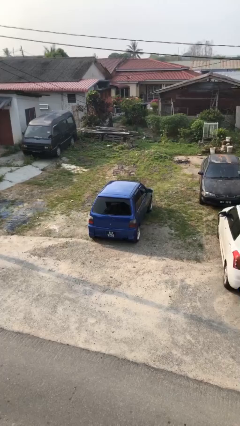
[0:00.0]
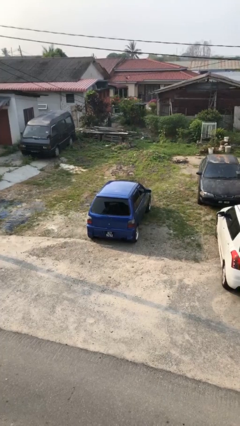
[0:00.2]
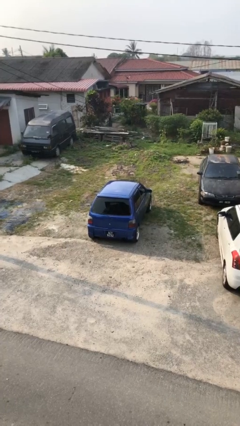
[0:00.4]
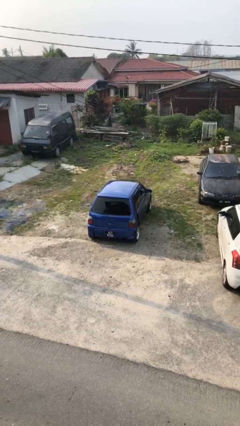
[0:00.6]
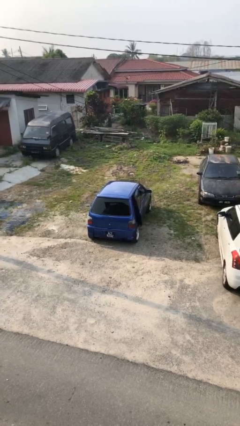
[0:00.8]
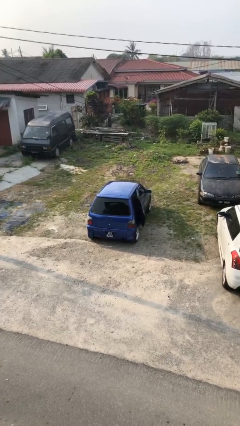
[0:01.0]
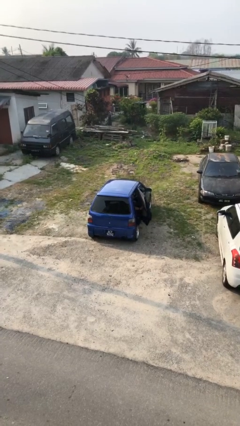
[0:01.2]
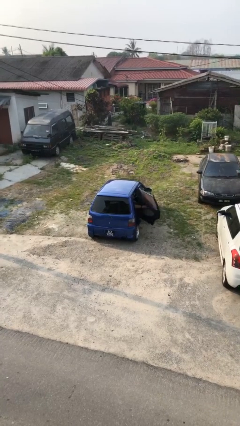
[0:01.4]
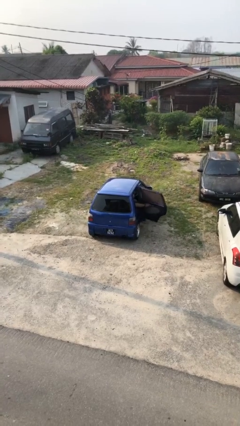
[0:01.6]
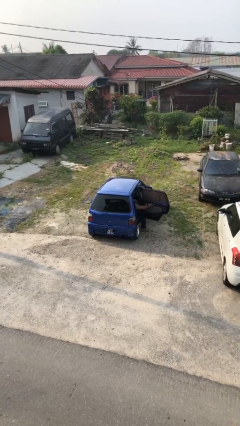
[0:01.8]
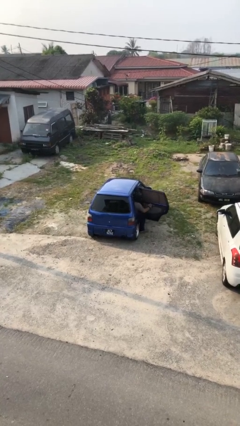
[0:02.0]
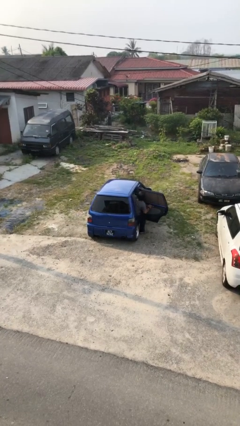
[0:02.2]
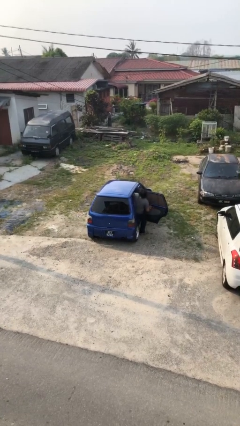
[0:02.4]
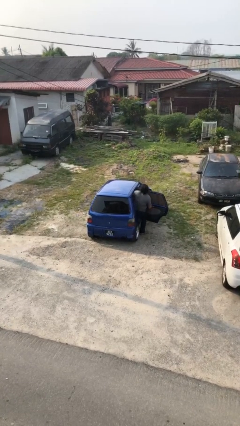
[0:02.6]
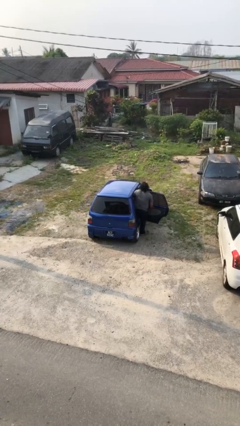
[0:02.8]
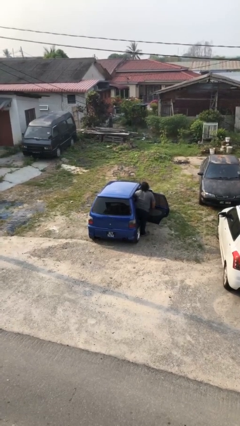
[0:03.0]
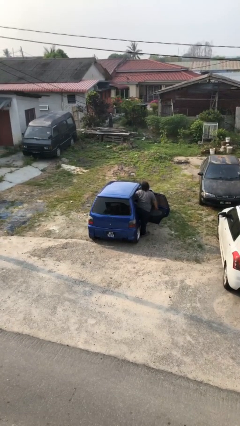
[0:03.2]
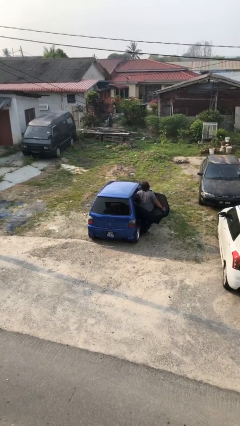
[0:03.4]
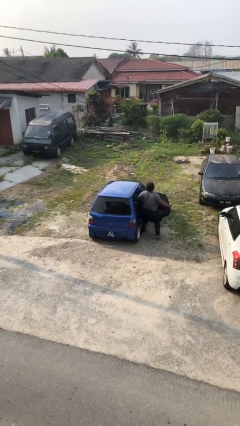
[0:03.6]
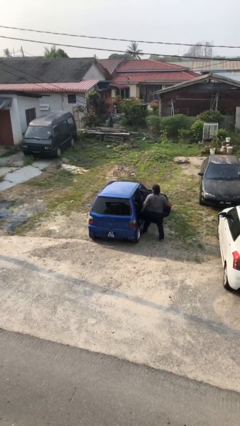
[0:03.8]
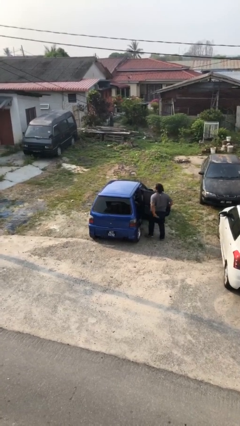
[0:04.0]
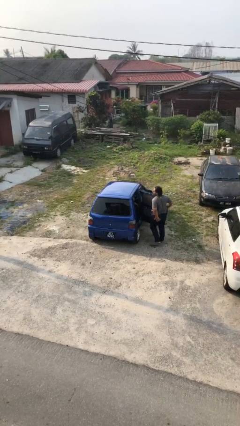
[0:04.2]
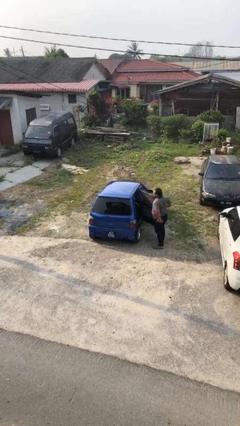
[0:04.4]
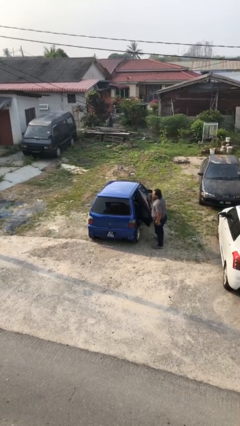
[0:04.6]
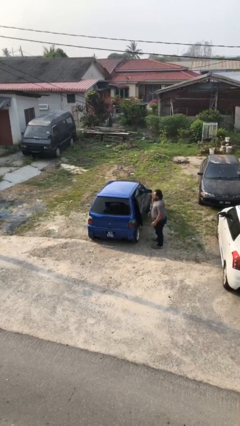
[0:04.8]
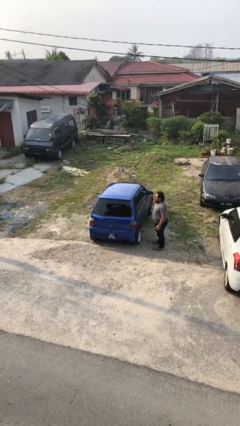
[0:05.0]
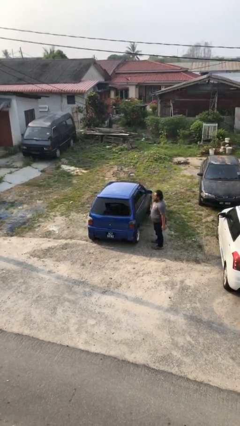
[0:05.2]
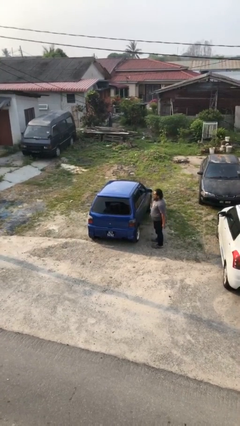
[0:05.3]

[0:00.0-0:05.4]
car drops off person

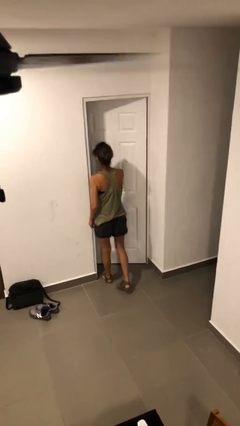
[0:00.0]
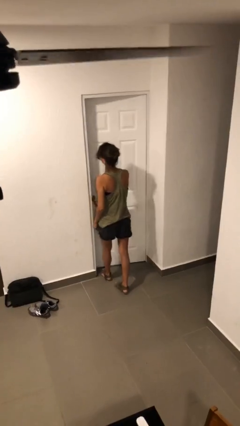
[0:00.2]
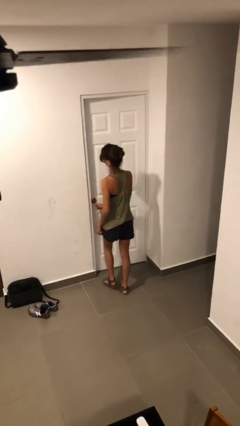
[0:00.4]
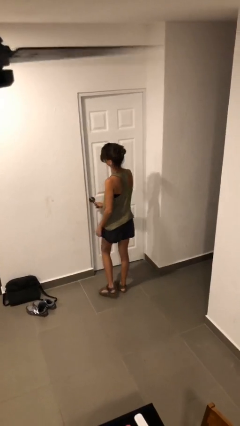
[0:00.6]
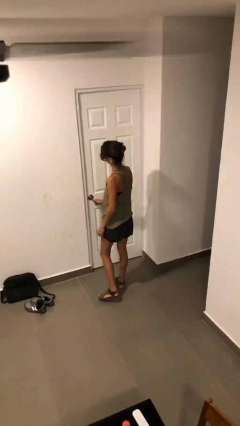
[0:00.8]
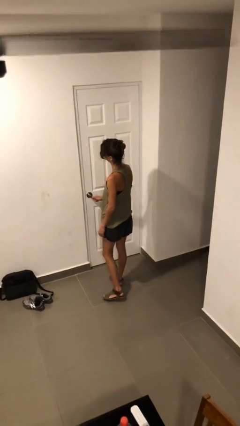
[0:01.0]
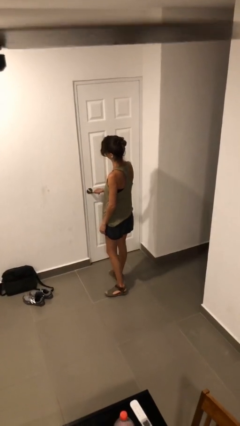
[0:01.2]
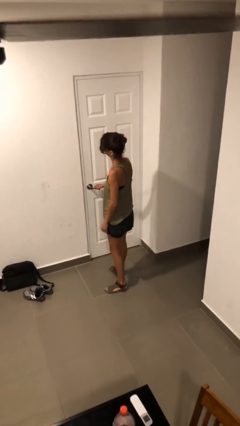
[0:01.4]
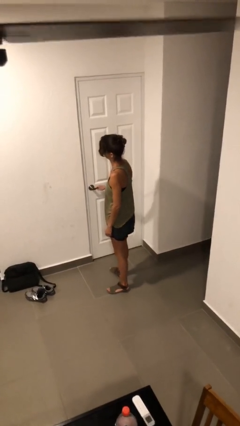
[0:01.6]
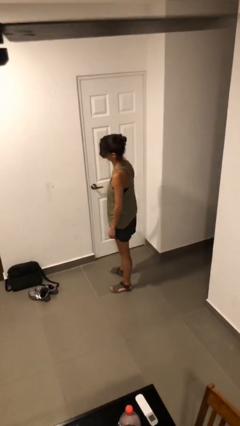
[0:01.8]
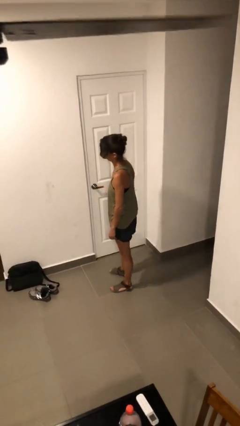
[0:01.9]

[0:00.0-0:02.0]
person closes facility door

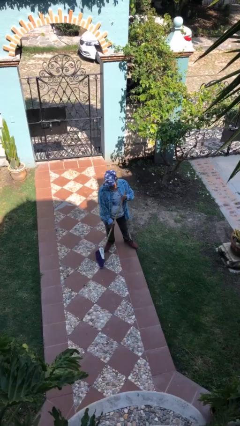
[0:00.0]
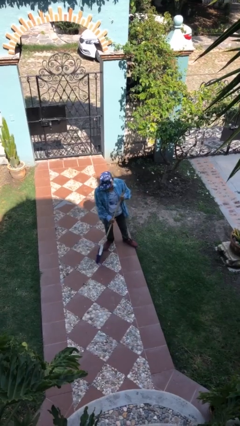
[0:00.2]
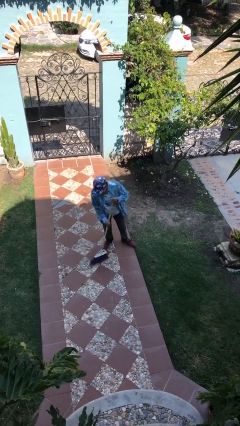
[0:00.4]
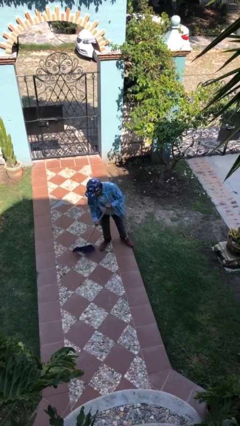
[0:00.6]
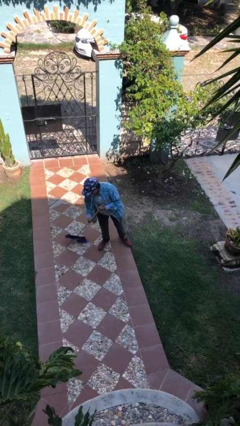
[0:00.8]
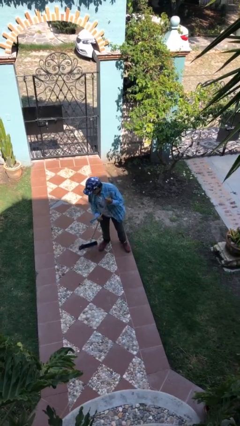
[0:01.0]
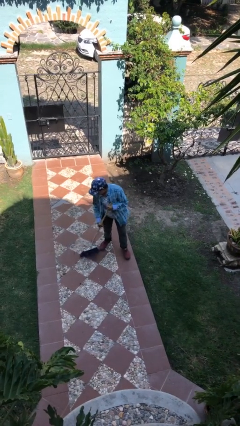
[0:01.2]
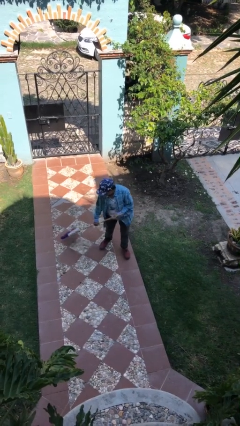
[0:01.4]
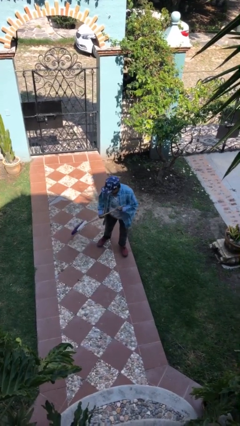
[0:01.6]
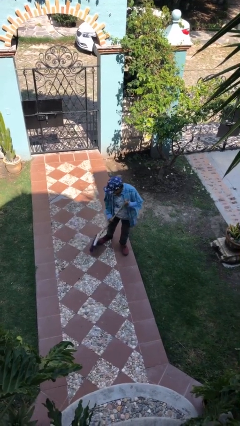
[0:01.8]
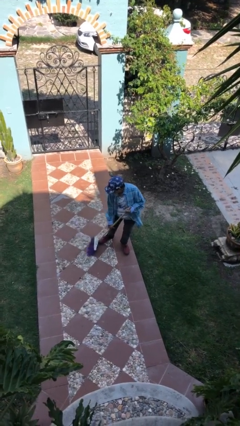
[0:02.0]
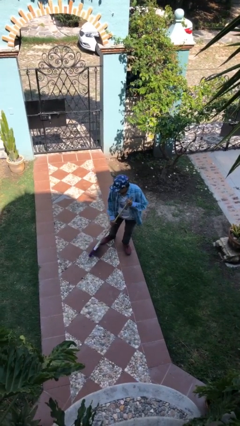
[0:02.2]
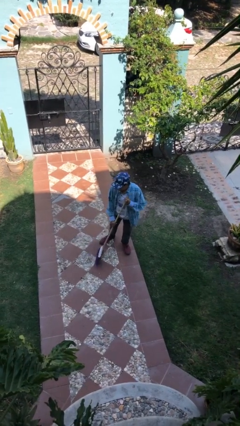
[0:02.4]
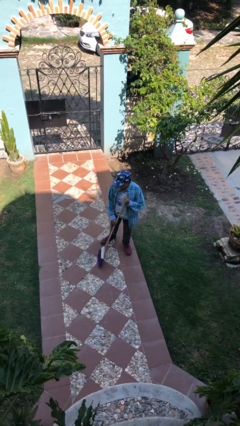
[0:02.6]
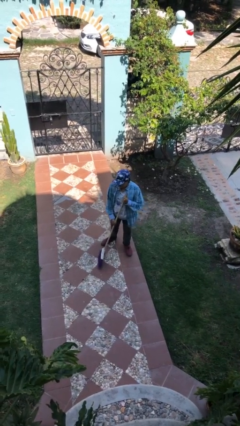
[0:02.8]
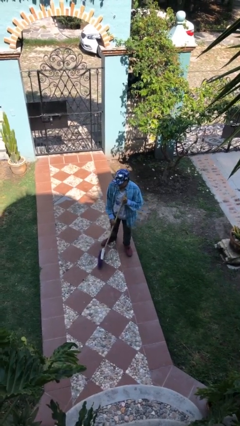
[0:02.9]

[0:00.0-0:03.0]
person sweeps floor

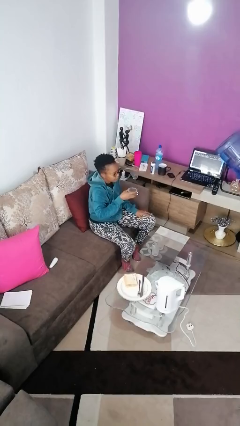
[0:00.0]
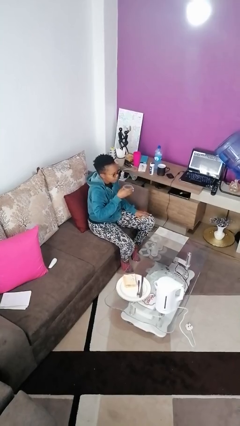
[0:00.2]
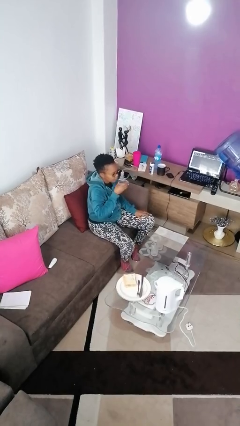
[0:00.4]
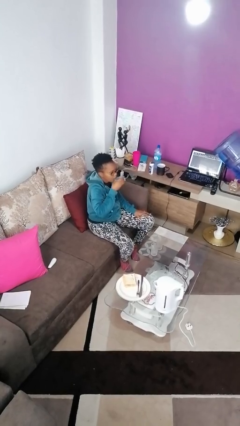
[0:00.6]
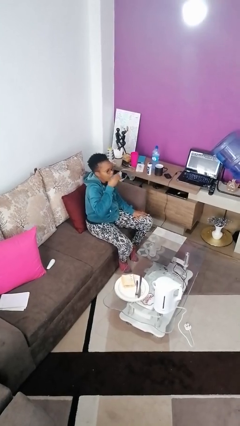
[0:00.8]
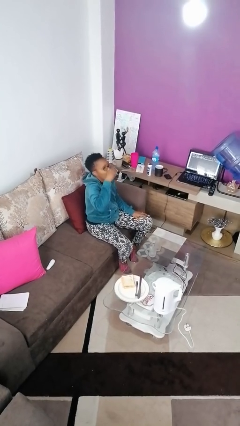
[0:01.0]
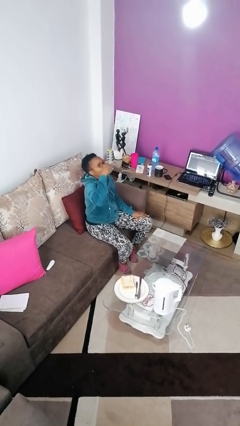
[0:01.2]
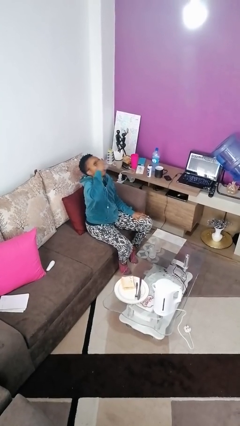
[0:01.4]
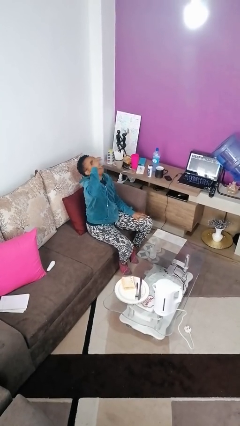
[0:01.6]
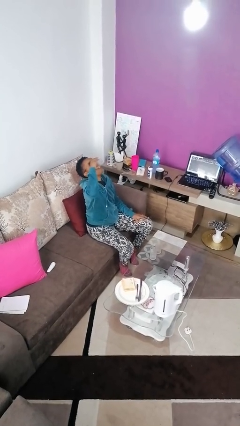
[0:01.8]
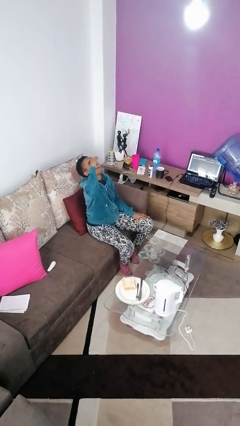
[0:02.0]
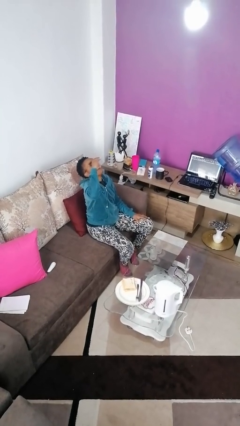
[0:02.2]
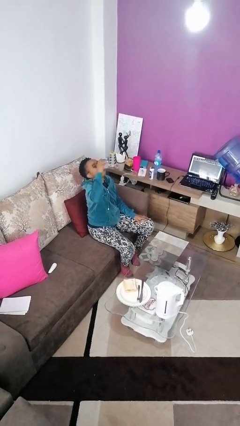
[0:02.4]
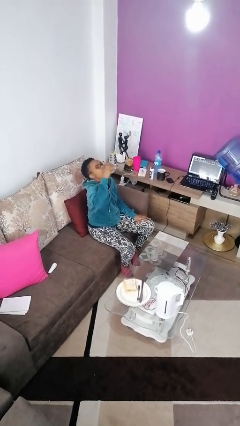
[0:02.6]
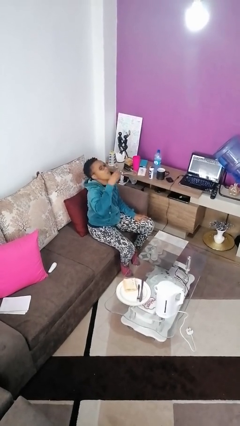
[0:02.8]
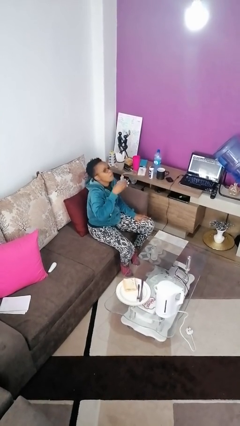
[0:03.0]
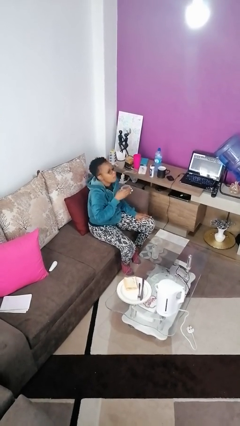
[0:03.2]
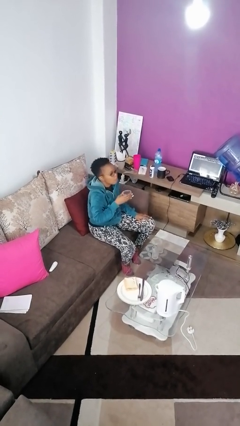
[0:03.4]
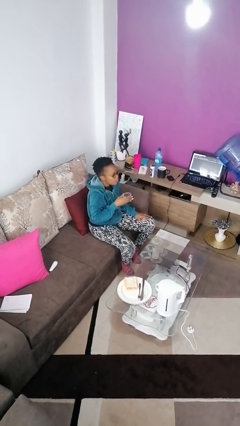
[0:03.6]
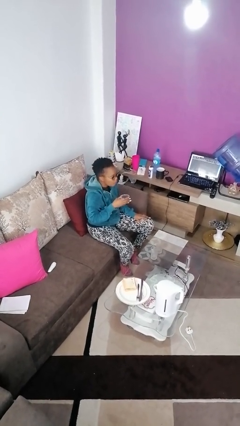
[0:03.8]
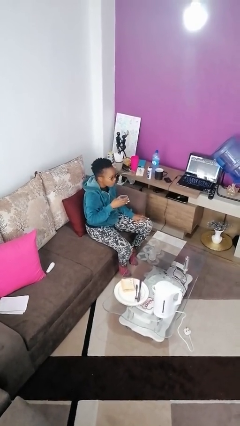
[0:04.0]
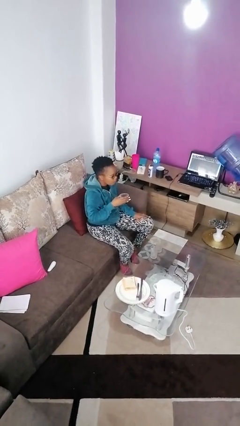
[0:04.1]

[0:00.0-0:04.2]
person drinks from shotglass

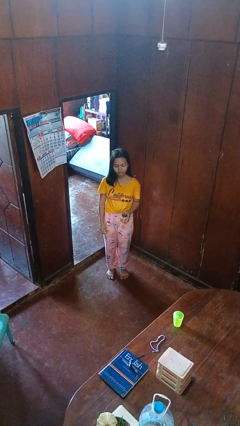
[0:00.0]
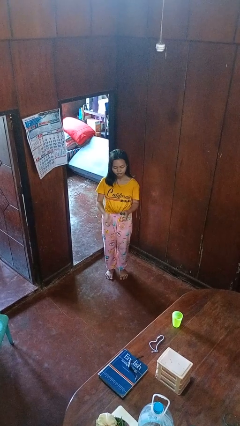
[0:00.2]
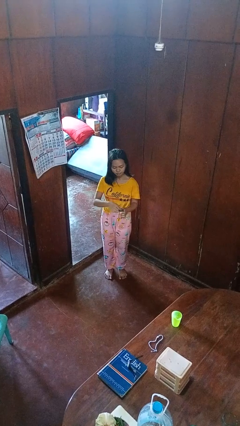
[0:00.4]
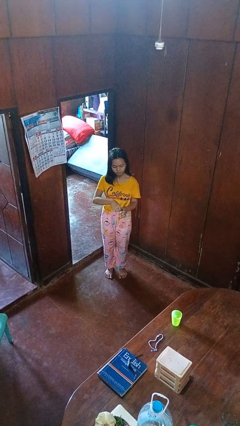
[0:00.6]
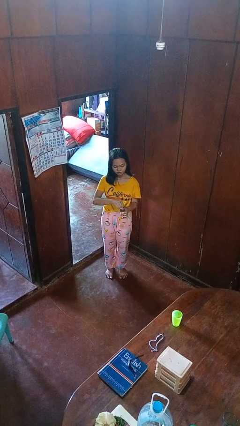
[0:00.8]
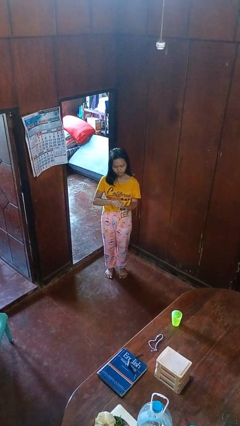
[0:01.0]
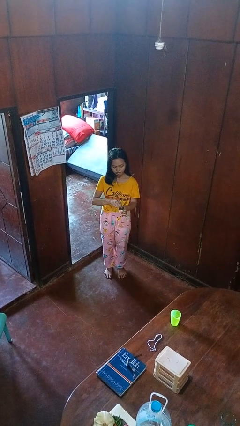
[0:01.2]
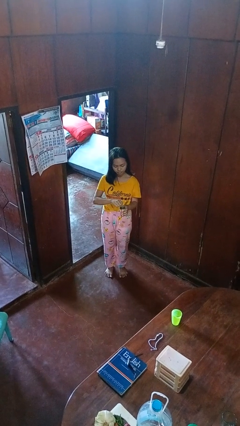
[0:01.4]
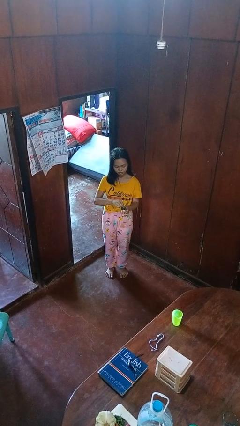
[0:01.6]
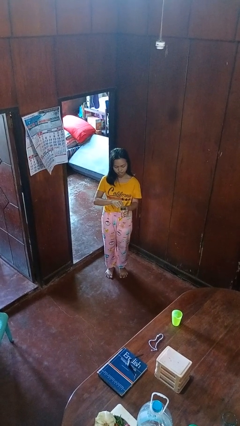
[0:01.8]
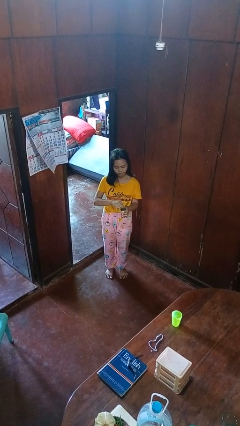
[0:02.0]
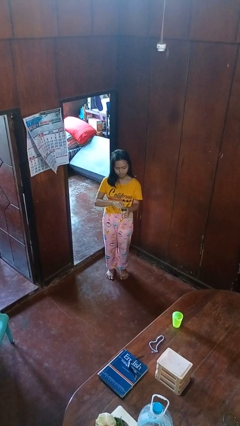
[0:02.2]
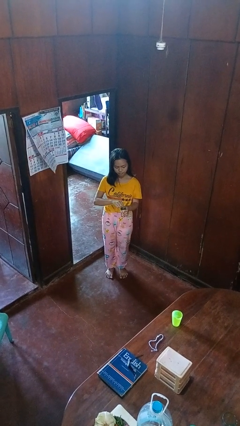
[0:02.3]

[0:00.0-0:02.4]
person opens beverage can

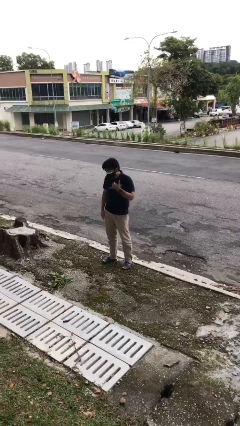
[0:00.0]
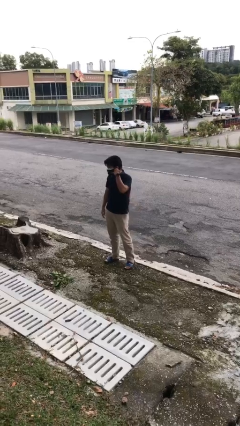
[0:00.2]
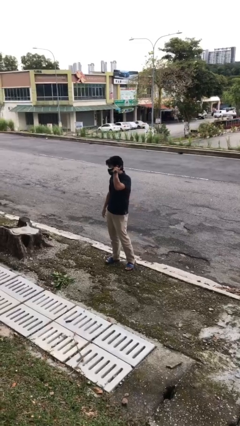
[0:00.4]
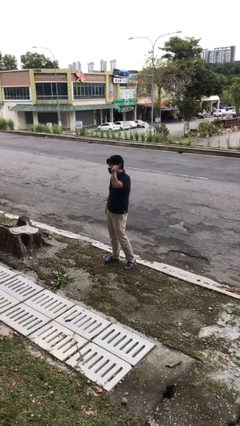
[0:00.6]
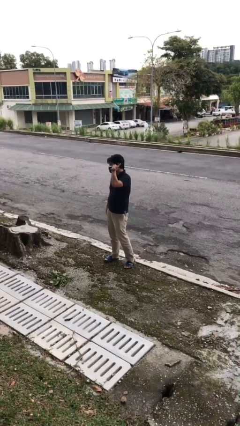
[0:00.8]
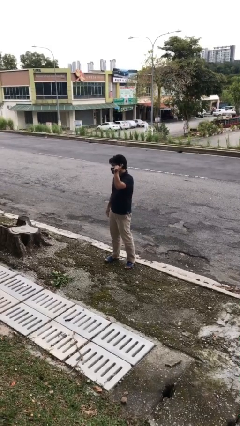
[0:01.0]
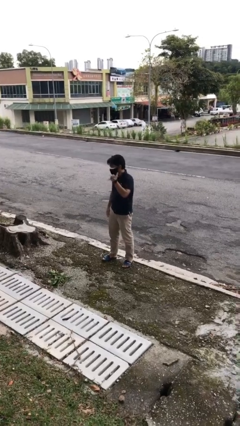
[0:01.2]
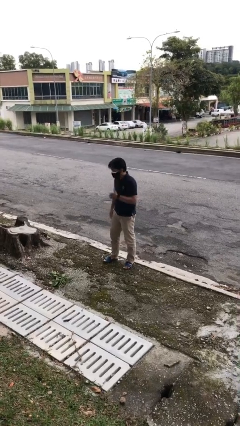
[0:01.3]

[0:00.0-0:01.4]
person gestures call me
